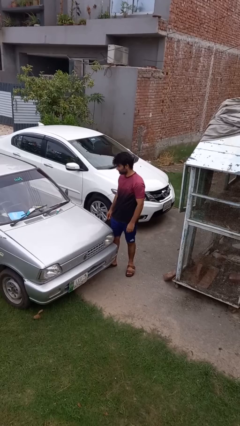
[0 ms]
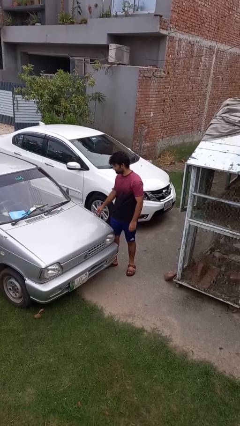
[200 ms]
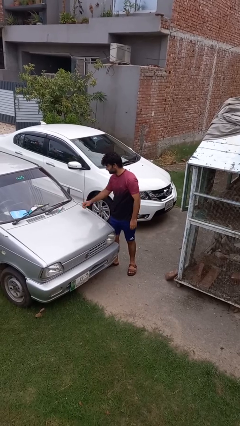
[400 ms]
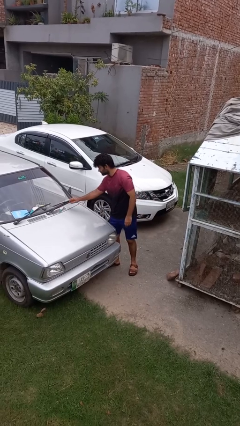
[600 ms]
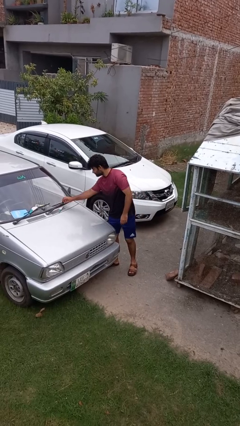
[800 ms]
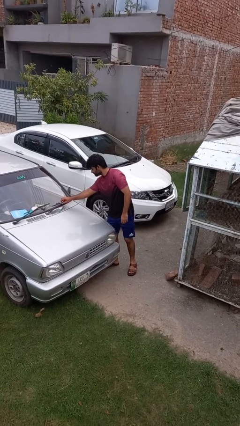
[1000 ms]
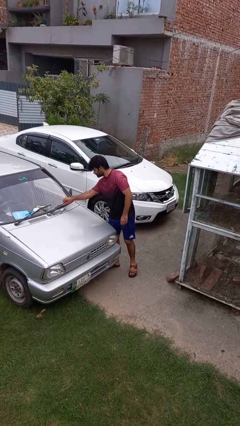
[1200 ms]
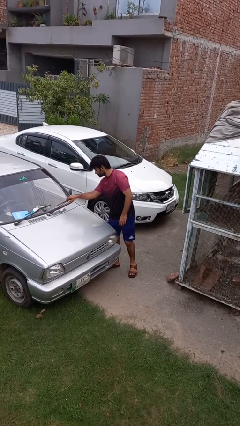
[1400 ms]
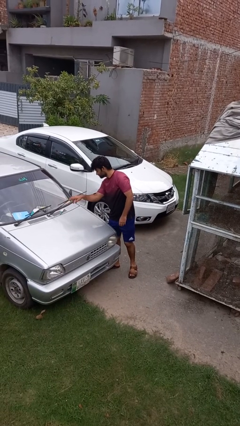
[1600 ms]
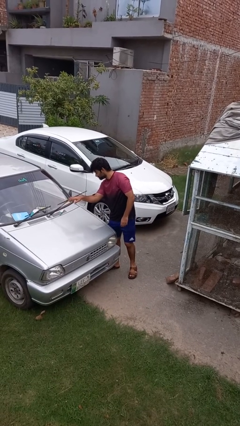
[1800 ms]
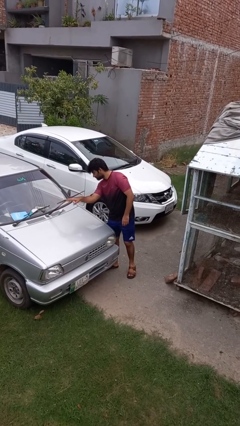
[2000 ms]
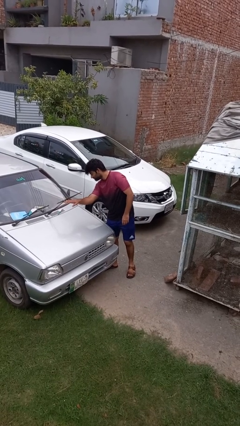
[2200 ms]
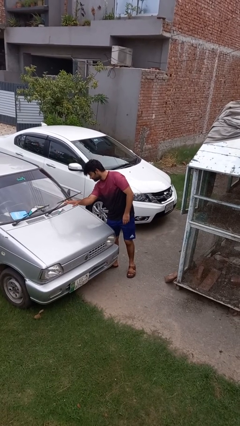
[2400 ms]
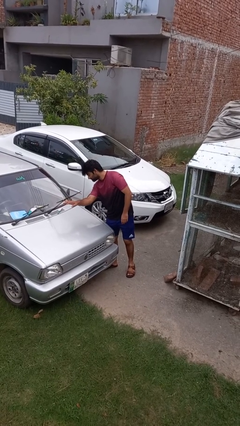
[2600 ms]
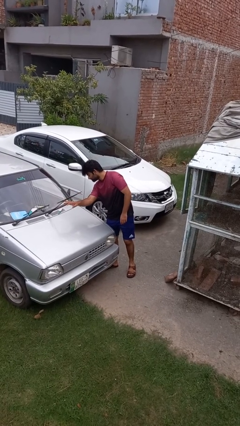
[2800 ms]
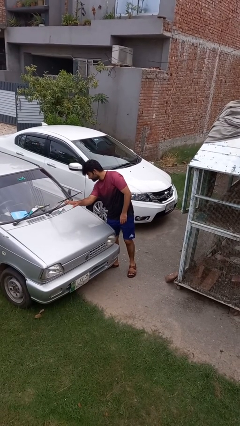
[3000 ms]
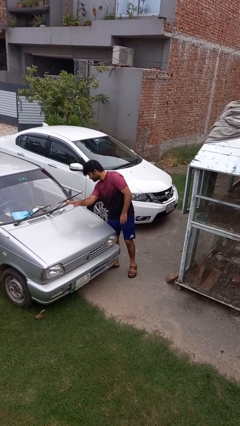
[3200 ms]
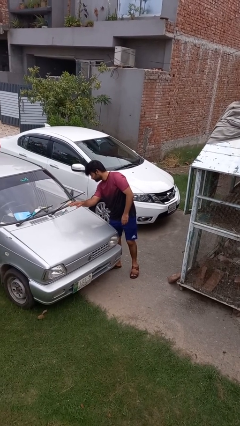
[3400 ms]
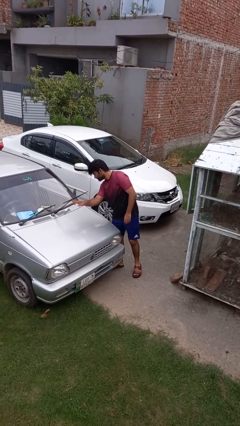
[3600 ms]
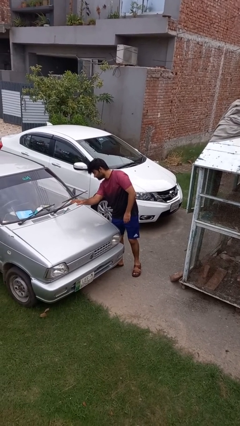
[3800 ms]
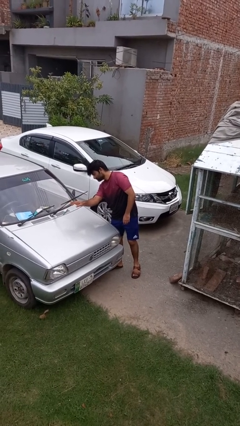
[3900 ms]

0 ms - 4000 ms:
person flips up car wipers

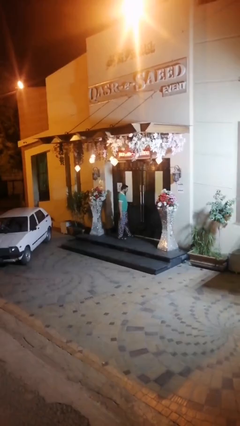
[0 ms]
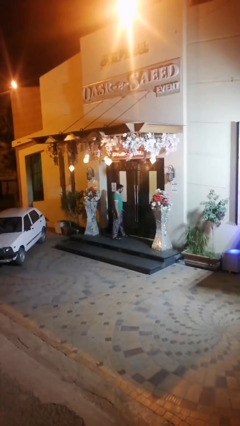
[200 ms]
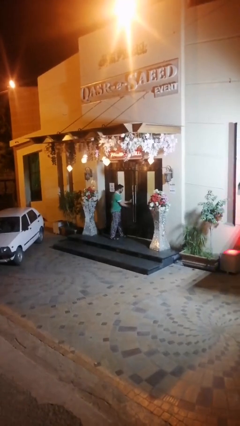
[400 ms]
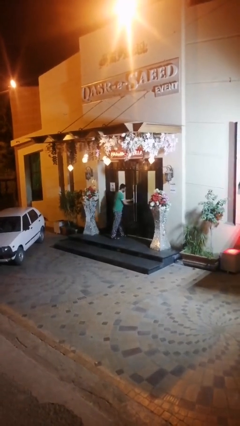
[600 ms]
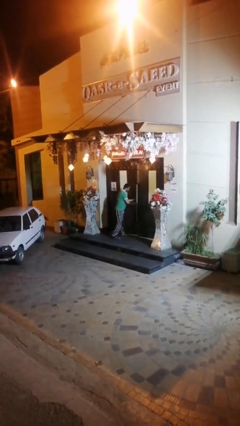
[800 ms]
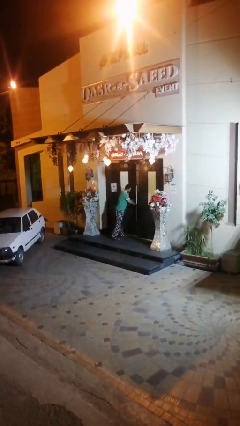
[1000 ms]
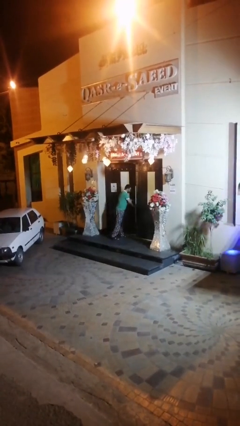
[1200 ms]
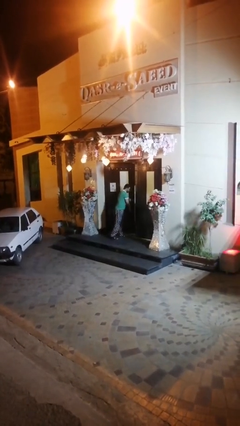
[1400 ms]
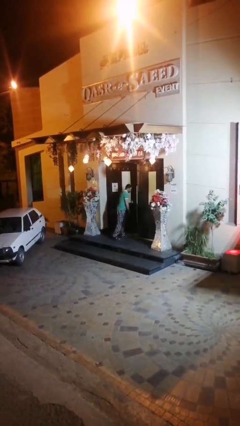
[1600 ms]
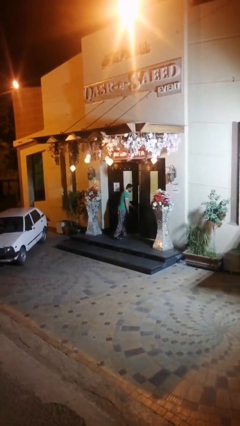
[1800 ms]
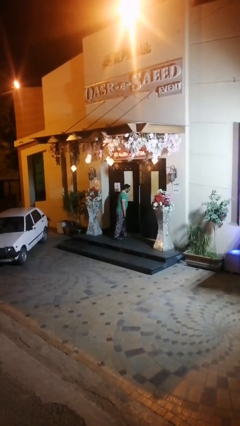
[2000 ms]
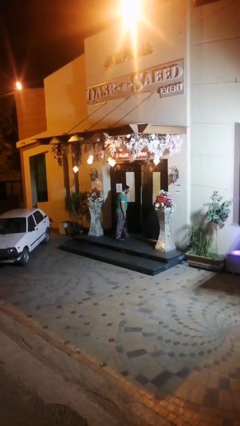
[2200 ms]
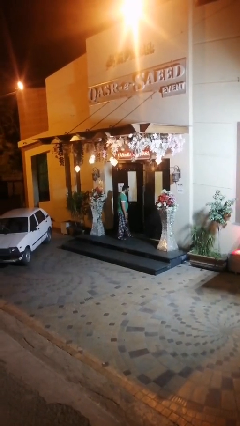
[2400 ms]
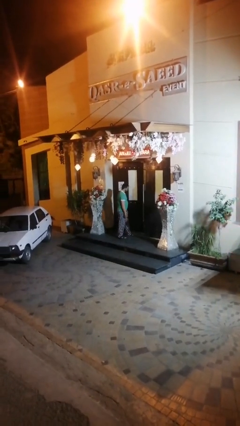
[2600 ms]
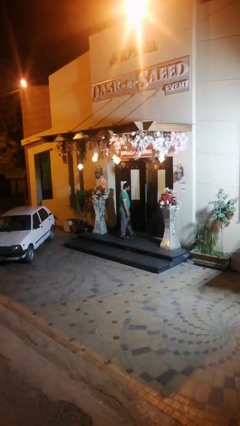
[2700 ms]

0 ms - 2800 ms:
person opens facility door

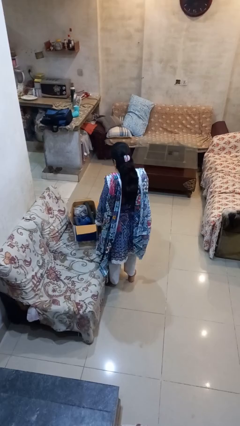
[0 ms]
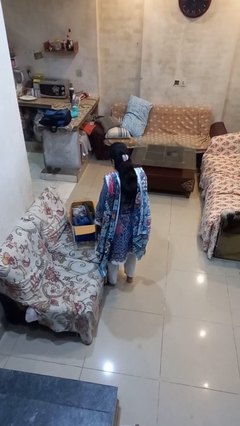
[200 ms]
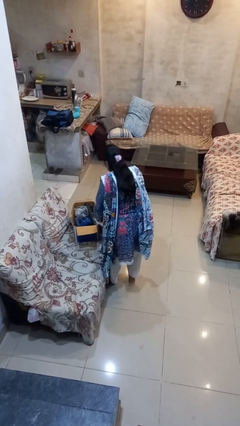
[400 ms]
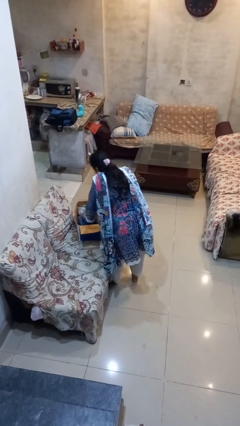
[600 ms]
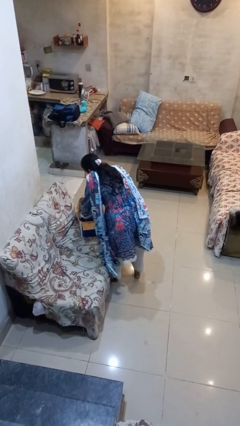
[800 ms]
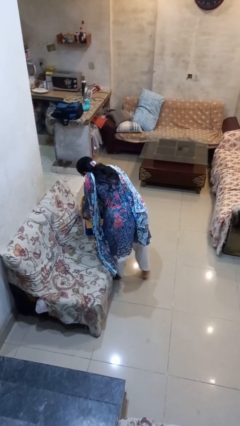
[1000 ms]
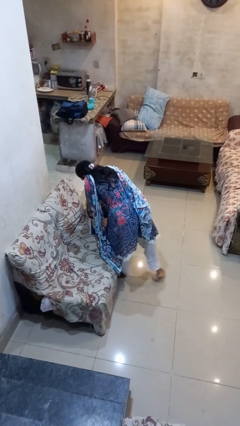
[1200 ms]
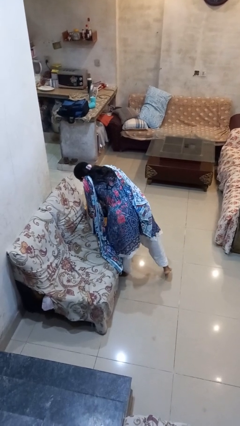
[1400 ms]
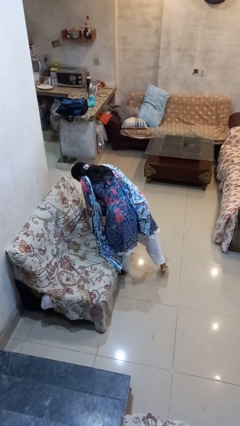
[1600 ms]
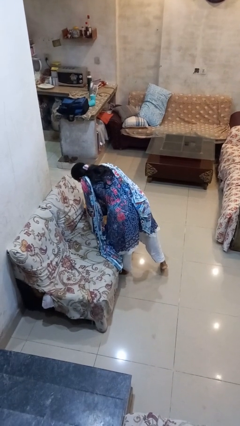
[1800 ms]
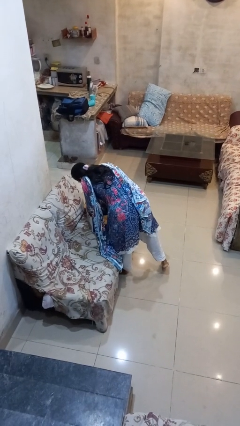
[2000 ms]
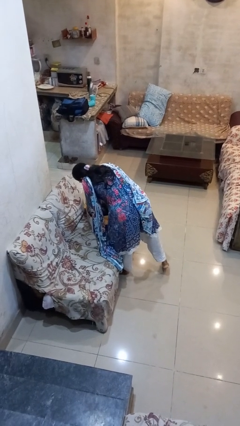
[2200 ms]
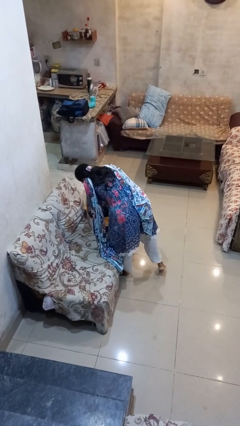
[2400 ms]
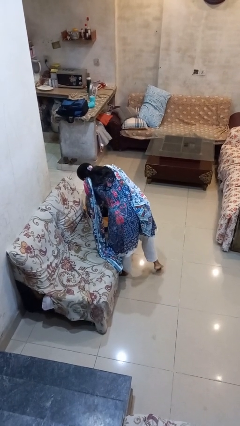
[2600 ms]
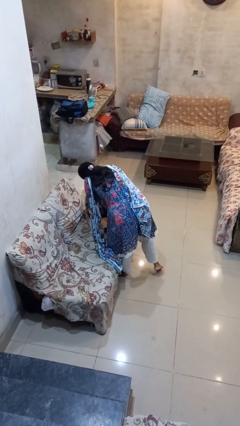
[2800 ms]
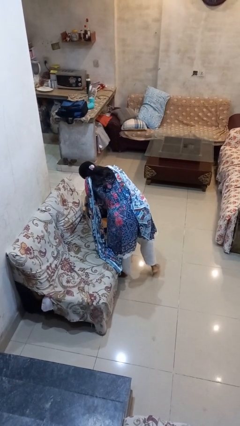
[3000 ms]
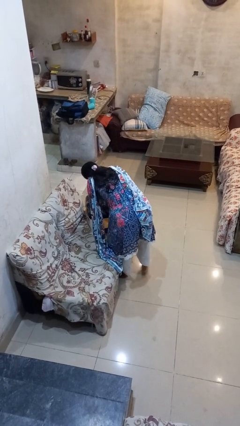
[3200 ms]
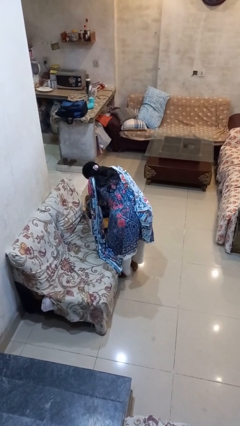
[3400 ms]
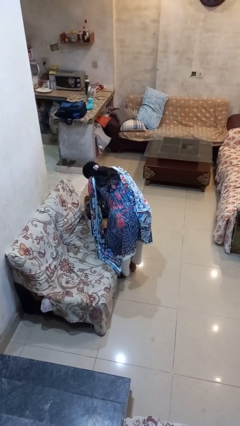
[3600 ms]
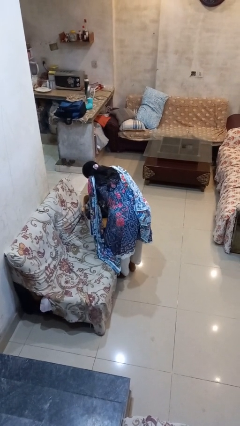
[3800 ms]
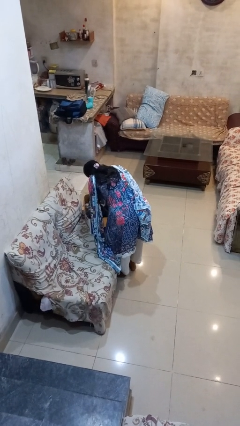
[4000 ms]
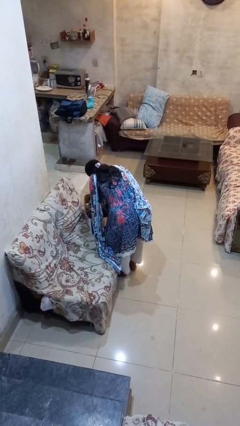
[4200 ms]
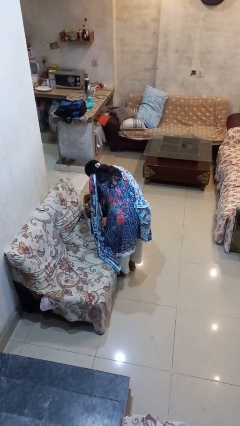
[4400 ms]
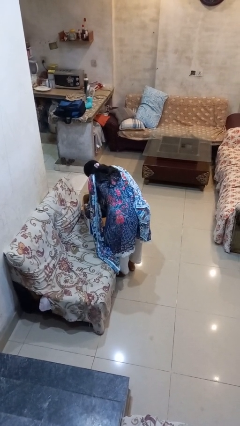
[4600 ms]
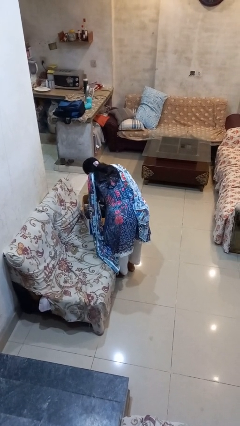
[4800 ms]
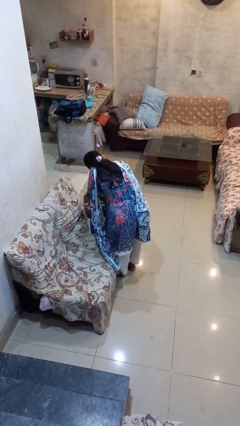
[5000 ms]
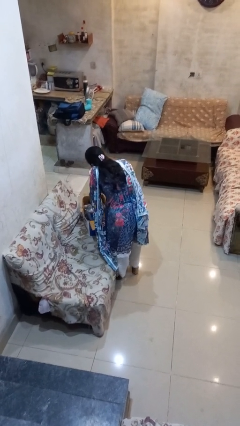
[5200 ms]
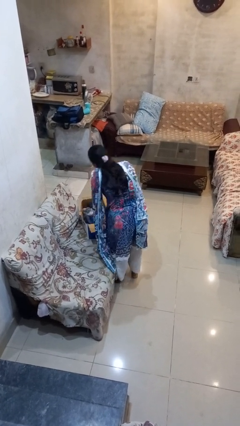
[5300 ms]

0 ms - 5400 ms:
person searches in box

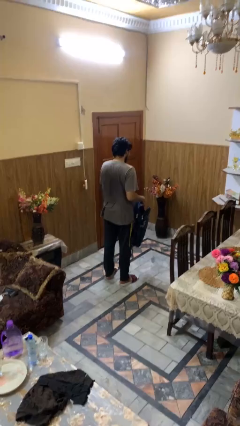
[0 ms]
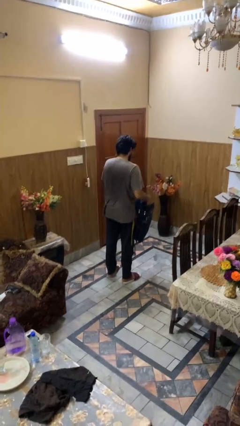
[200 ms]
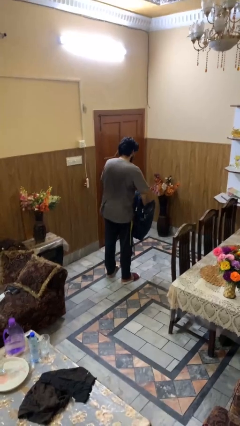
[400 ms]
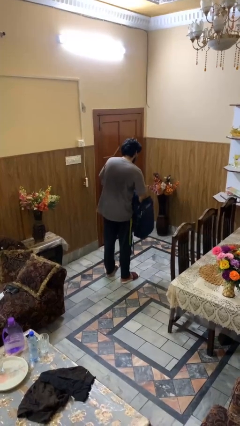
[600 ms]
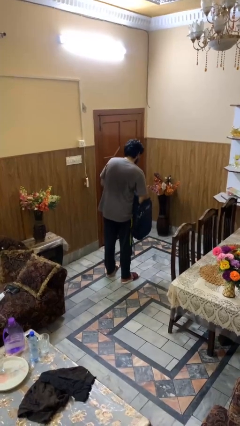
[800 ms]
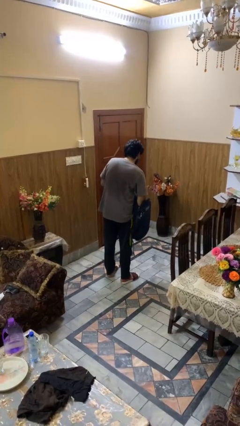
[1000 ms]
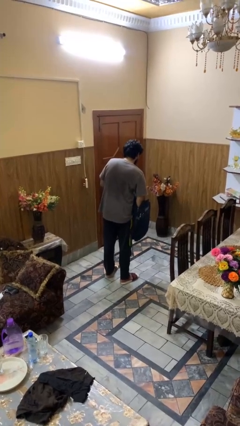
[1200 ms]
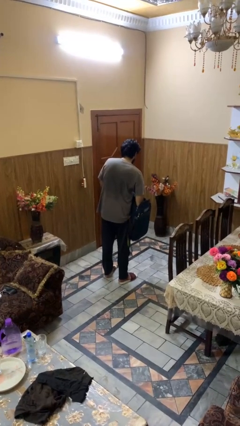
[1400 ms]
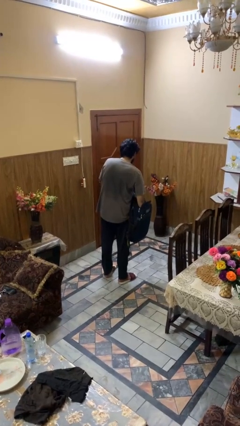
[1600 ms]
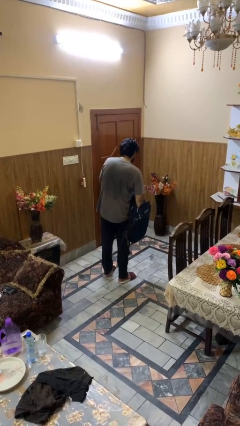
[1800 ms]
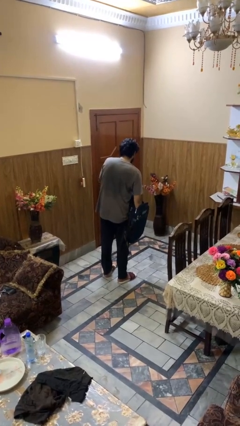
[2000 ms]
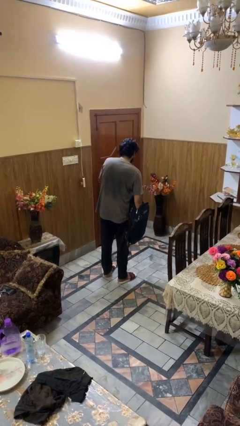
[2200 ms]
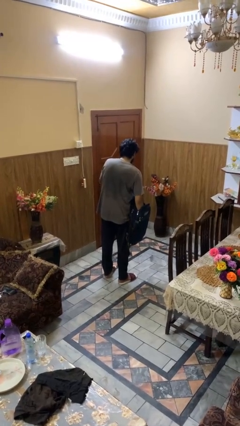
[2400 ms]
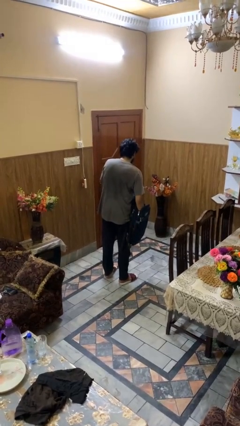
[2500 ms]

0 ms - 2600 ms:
person searches in backpack

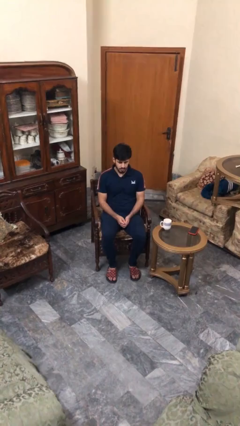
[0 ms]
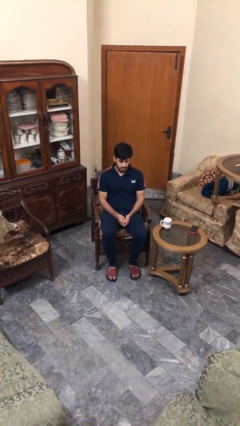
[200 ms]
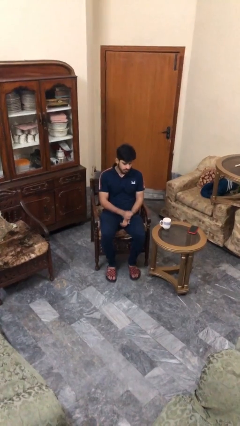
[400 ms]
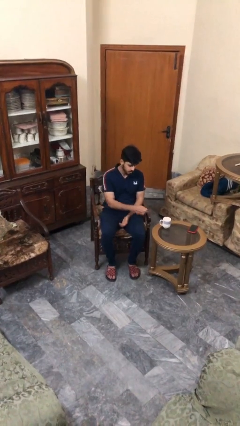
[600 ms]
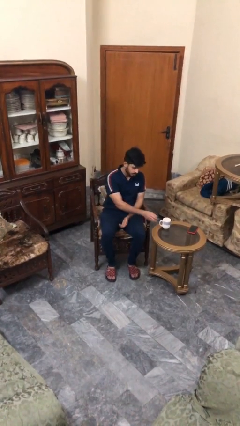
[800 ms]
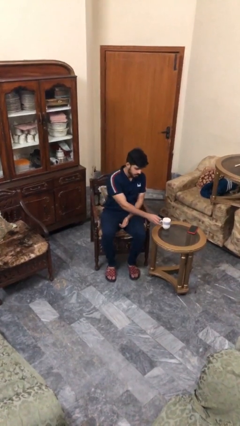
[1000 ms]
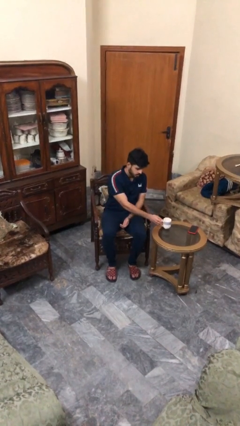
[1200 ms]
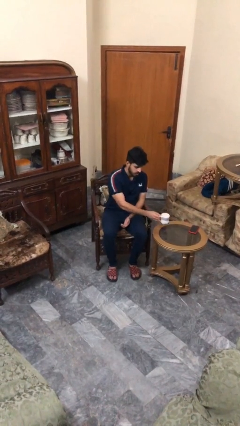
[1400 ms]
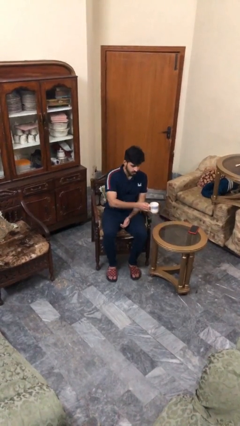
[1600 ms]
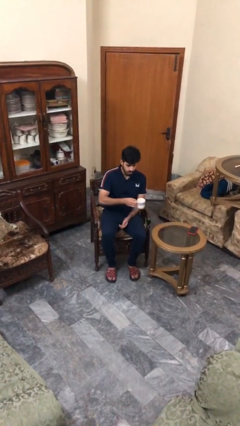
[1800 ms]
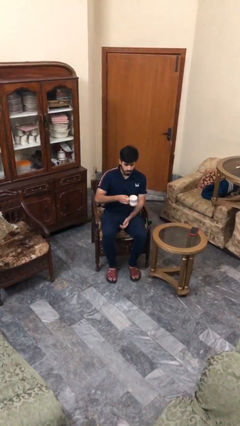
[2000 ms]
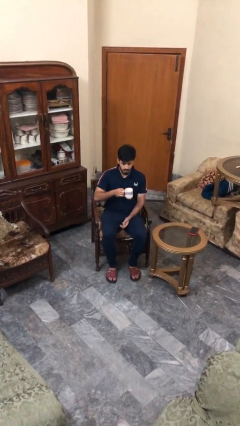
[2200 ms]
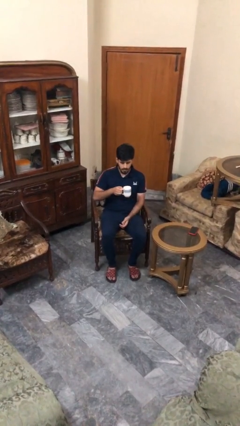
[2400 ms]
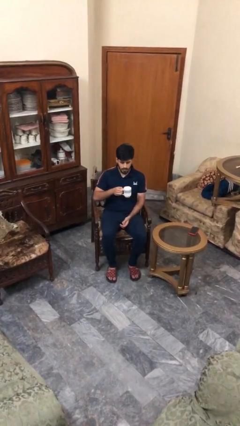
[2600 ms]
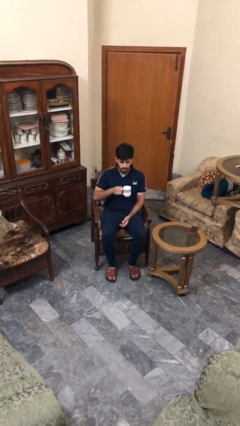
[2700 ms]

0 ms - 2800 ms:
person picks up object from table
